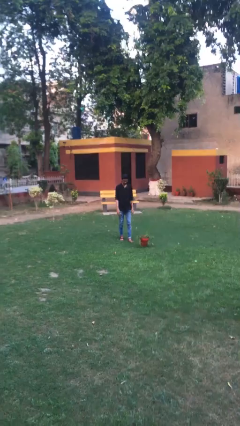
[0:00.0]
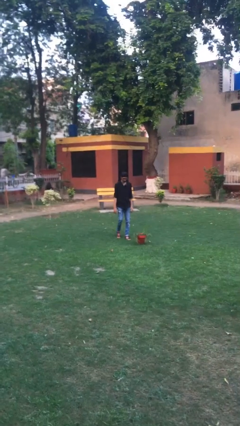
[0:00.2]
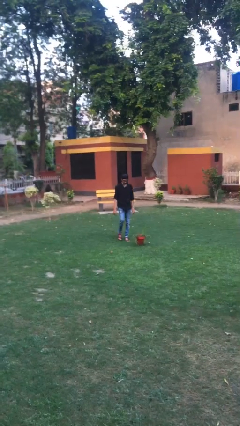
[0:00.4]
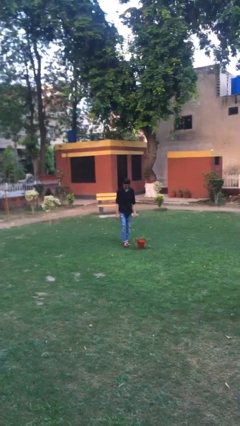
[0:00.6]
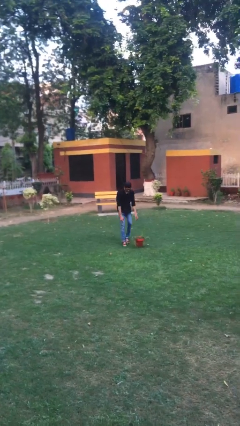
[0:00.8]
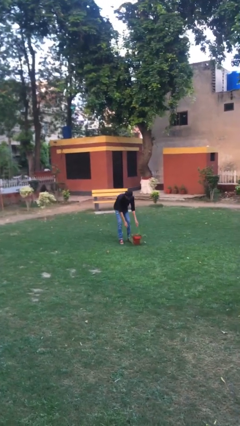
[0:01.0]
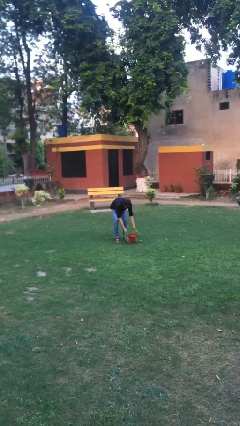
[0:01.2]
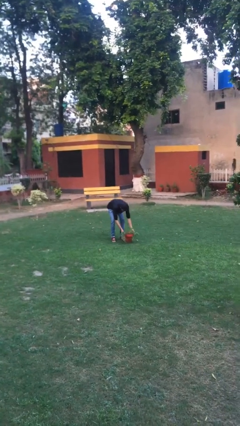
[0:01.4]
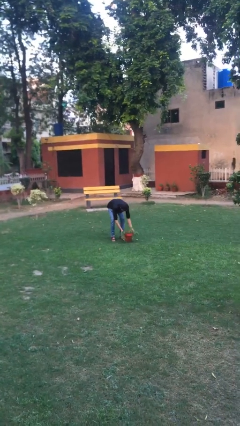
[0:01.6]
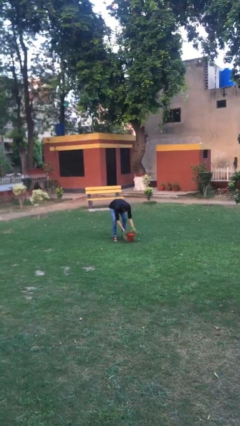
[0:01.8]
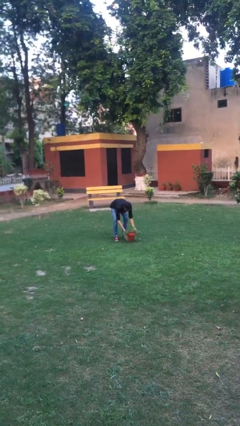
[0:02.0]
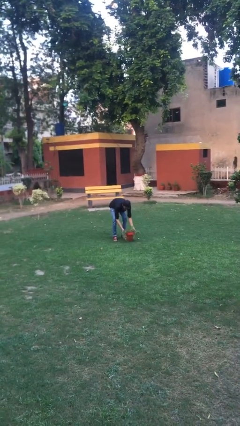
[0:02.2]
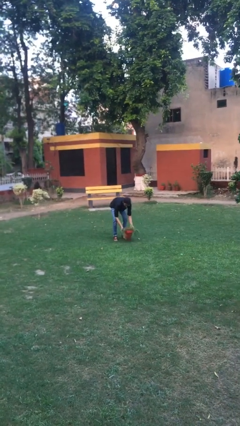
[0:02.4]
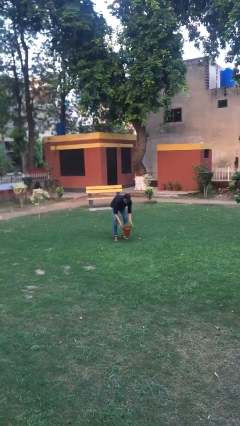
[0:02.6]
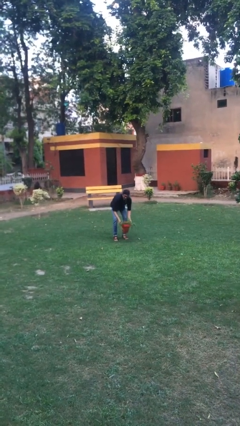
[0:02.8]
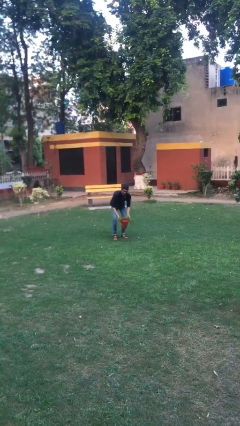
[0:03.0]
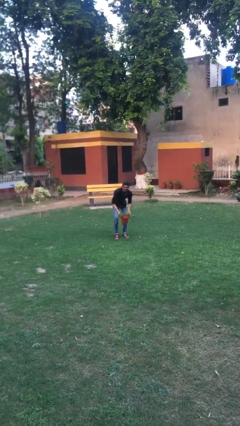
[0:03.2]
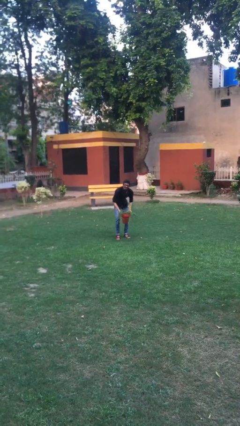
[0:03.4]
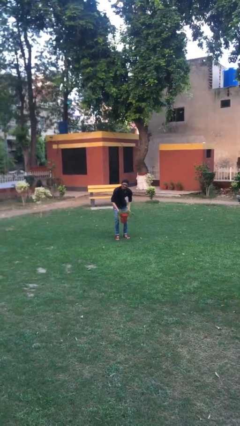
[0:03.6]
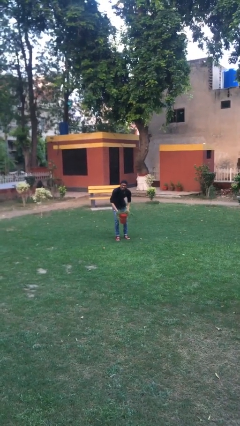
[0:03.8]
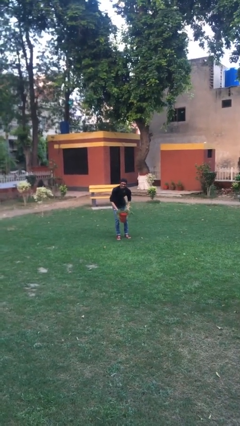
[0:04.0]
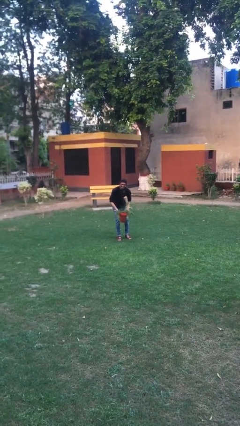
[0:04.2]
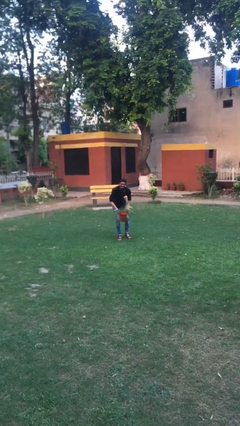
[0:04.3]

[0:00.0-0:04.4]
person picks up object from floor

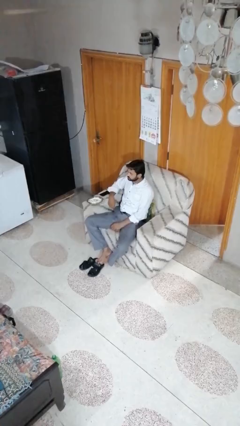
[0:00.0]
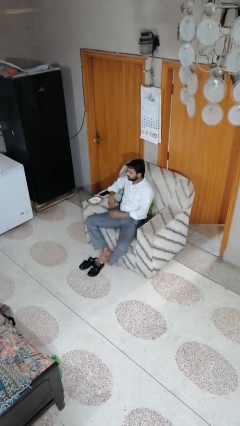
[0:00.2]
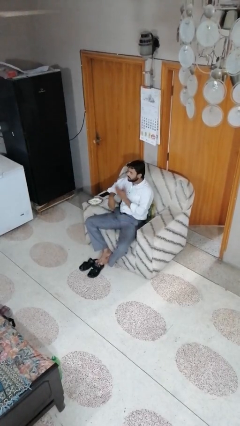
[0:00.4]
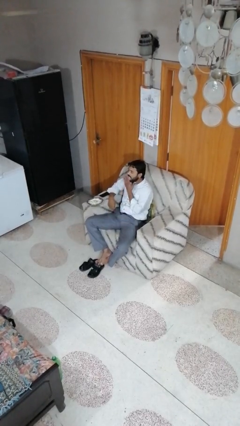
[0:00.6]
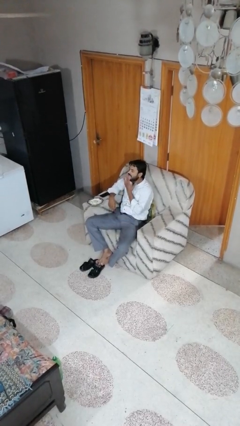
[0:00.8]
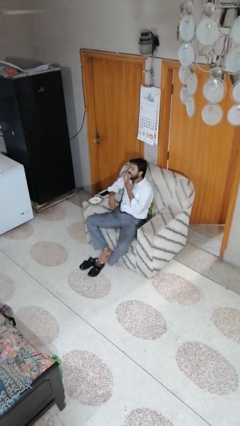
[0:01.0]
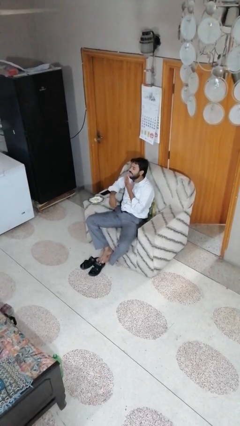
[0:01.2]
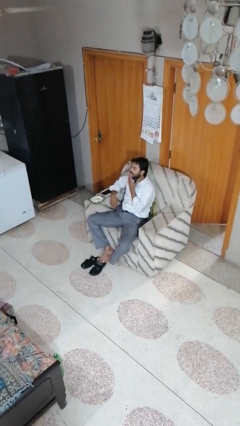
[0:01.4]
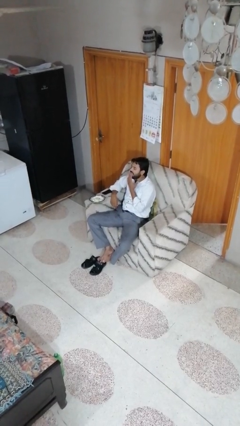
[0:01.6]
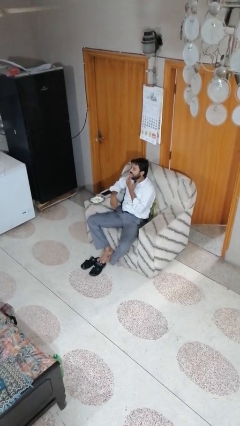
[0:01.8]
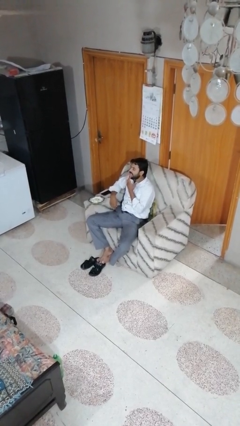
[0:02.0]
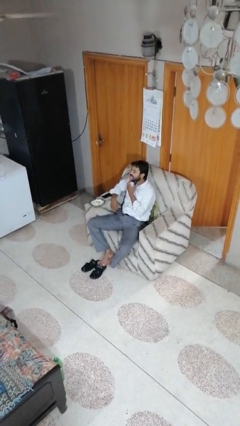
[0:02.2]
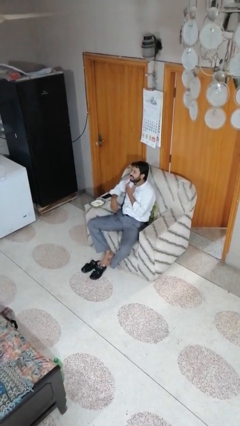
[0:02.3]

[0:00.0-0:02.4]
person licks fingers

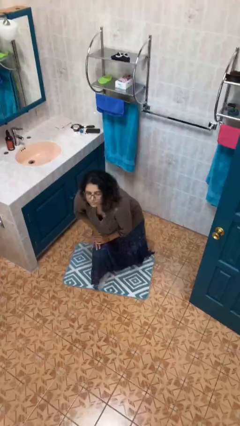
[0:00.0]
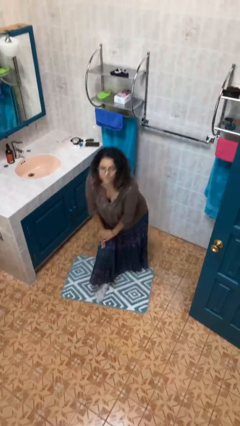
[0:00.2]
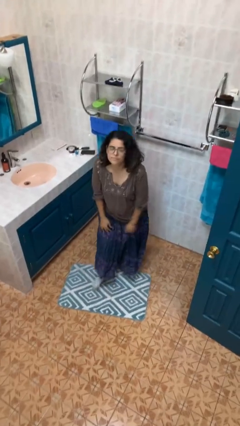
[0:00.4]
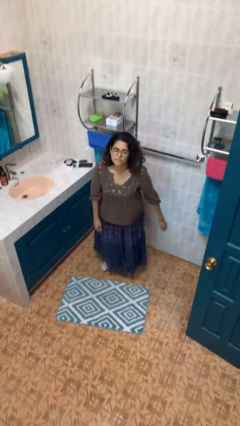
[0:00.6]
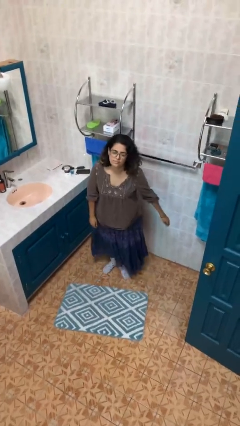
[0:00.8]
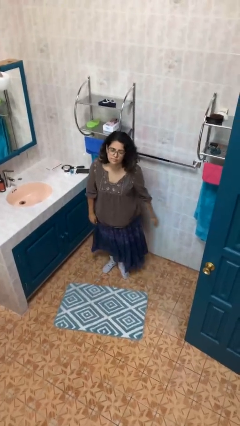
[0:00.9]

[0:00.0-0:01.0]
person stands up from floor

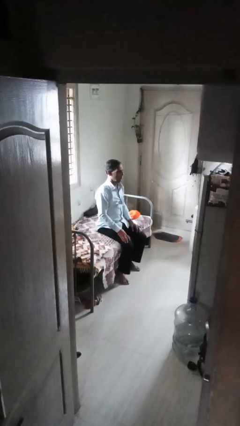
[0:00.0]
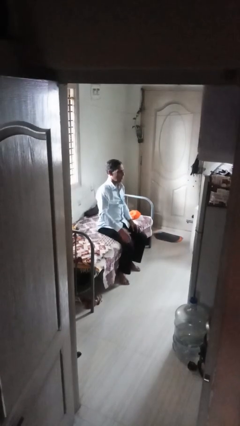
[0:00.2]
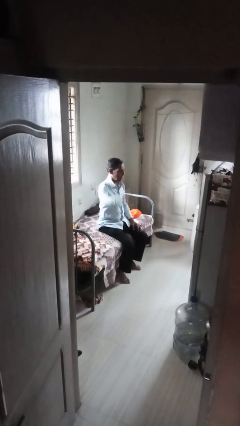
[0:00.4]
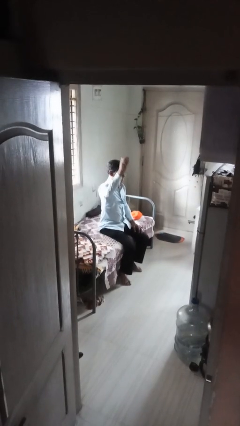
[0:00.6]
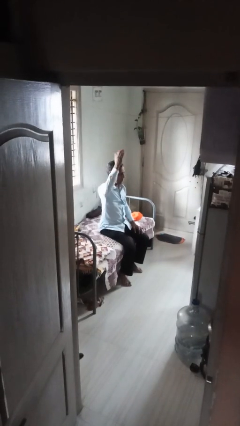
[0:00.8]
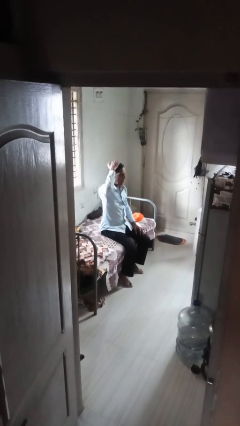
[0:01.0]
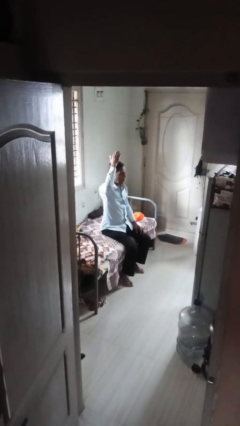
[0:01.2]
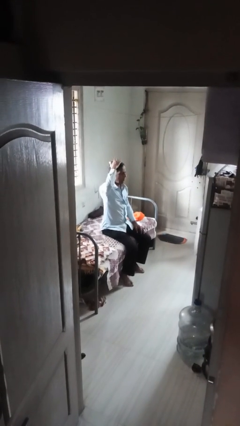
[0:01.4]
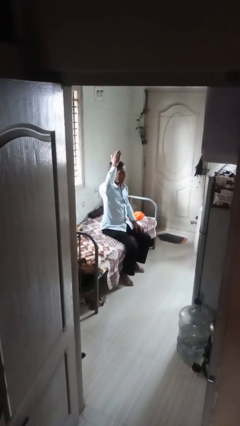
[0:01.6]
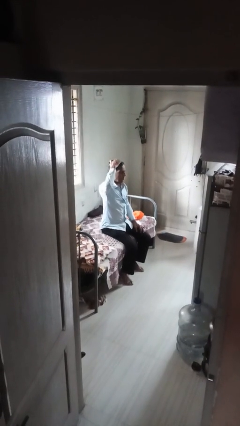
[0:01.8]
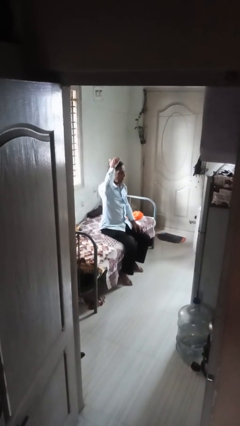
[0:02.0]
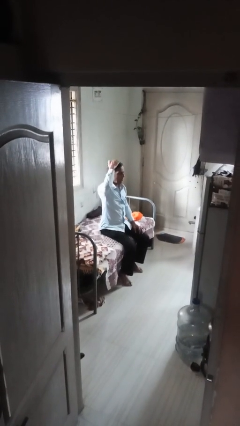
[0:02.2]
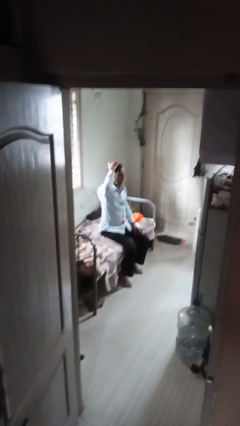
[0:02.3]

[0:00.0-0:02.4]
person pats head

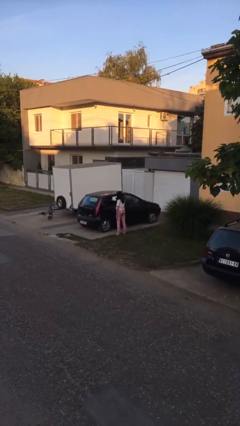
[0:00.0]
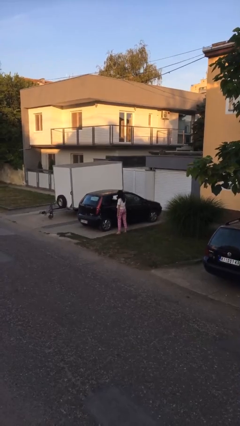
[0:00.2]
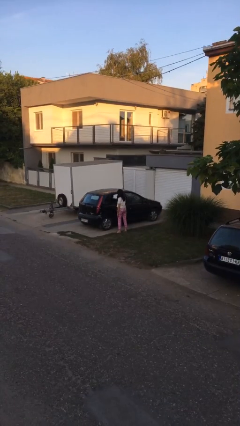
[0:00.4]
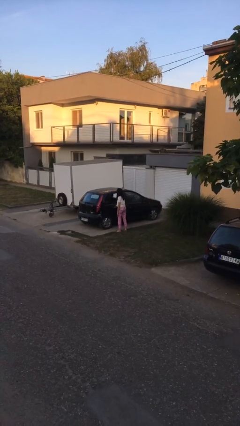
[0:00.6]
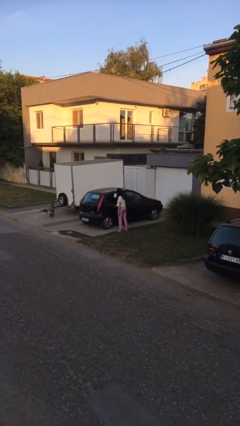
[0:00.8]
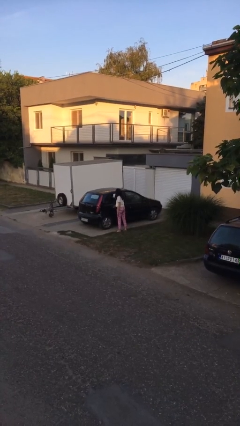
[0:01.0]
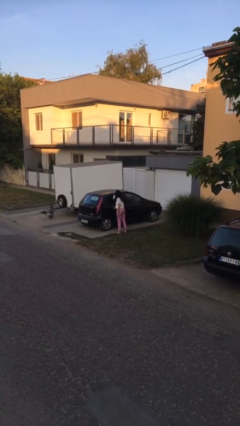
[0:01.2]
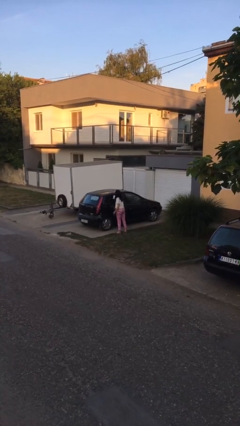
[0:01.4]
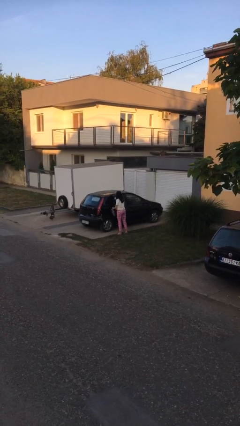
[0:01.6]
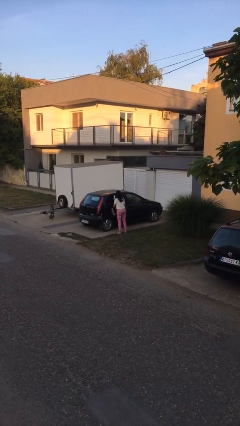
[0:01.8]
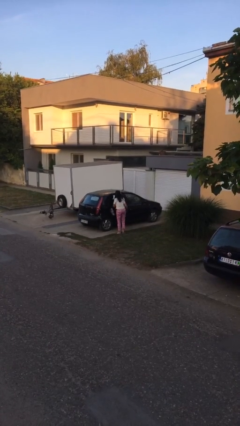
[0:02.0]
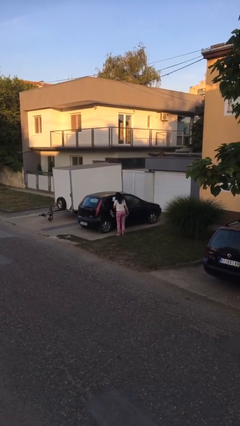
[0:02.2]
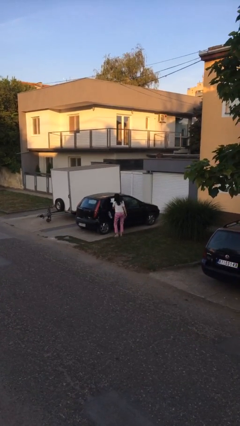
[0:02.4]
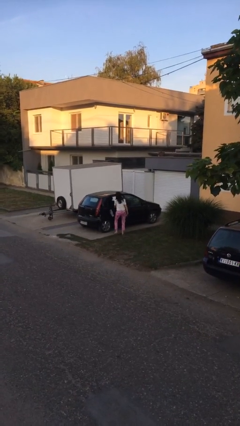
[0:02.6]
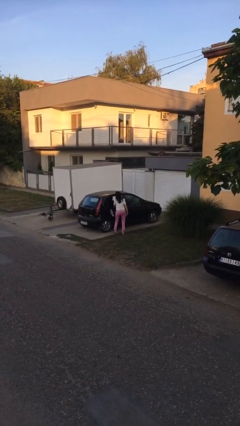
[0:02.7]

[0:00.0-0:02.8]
person opens car door

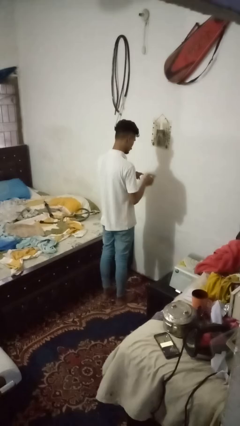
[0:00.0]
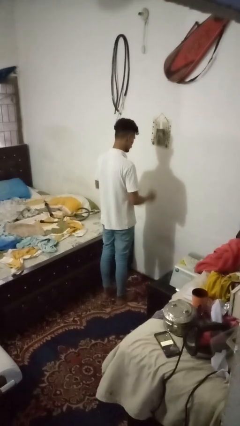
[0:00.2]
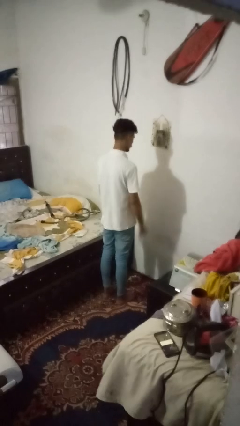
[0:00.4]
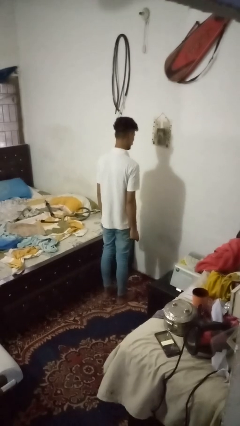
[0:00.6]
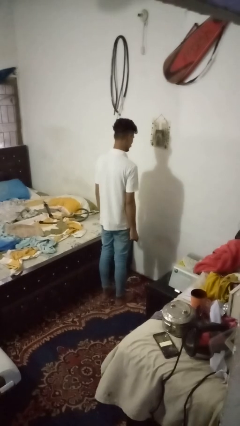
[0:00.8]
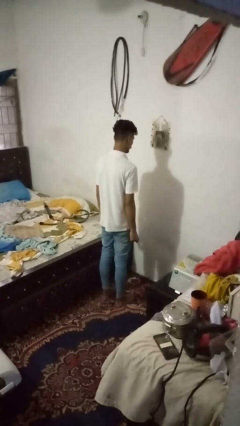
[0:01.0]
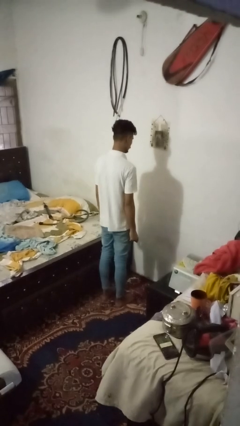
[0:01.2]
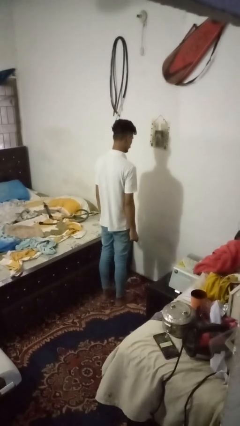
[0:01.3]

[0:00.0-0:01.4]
person paints fingernails

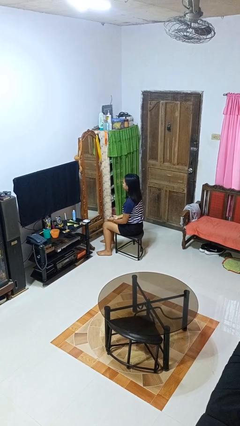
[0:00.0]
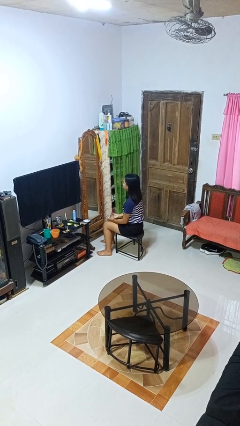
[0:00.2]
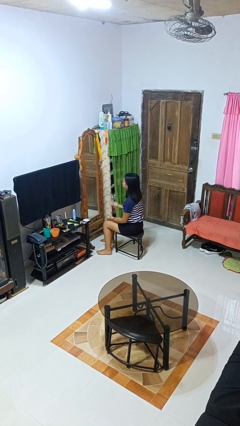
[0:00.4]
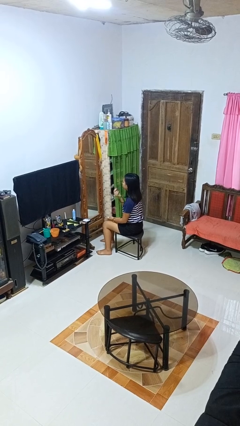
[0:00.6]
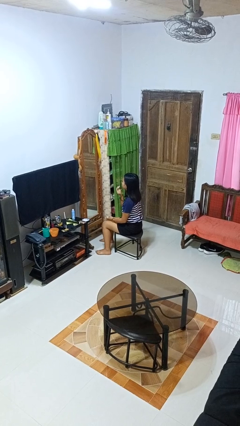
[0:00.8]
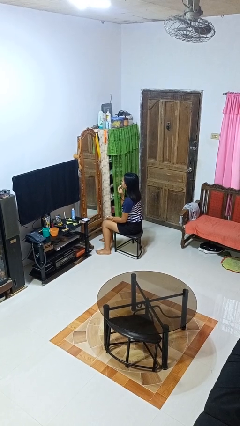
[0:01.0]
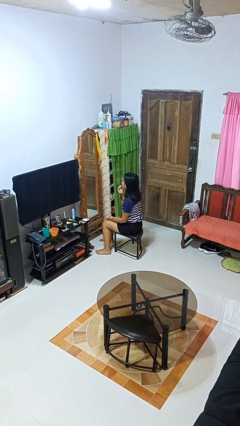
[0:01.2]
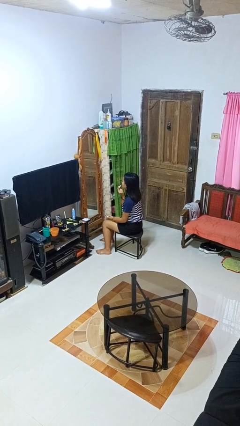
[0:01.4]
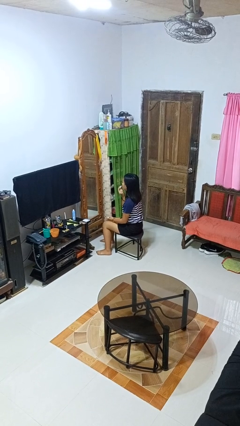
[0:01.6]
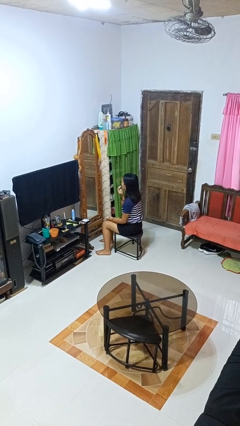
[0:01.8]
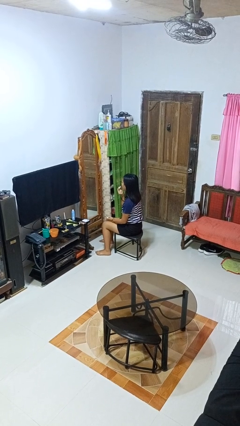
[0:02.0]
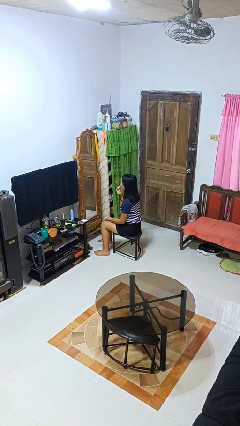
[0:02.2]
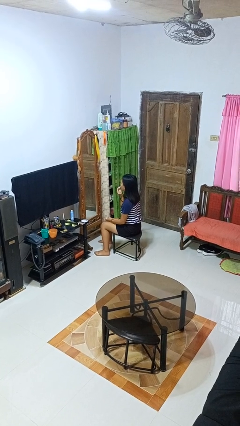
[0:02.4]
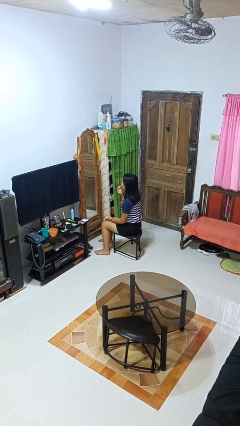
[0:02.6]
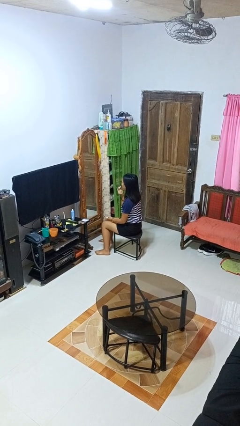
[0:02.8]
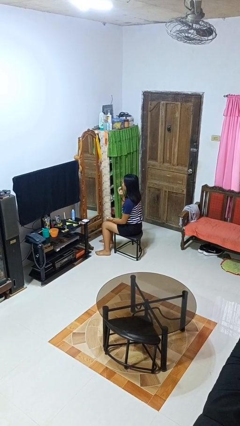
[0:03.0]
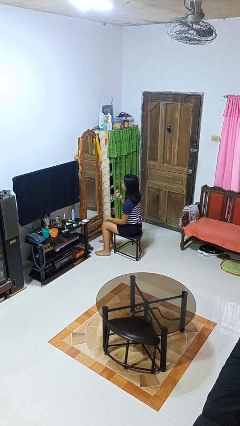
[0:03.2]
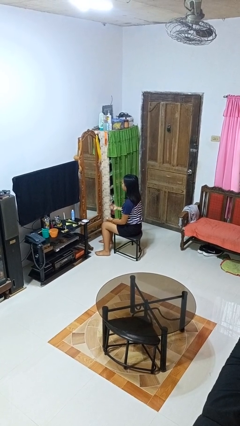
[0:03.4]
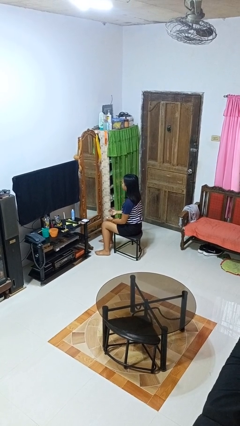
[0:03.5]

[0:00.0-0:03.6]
person applies lip makeup
